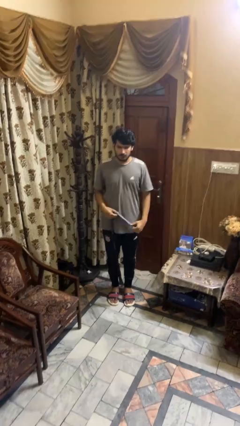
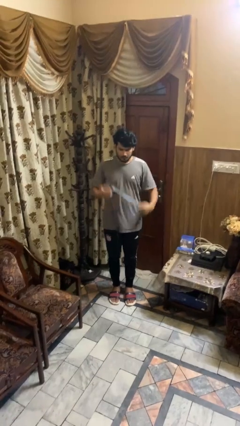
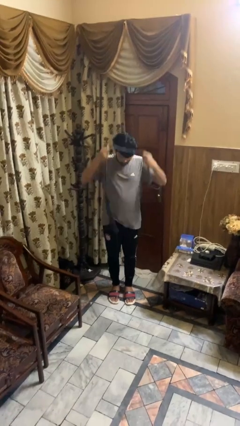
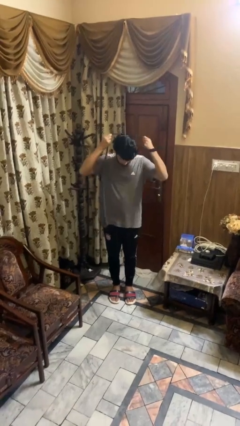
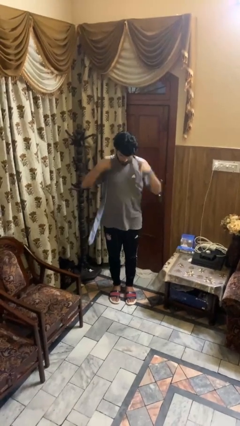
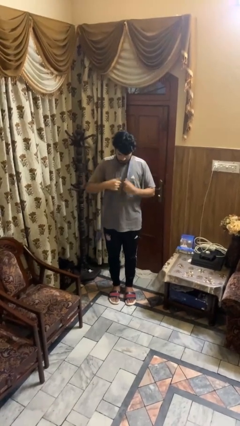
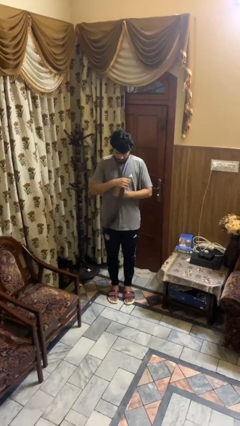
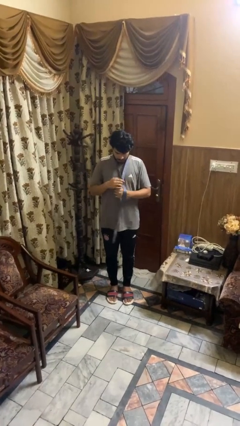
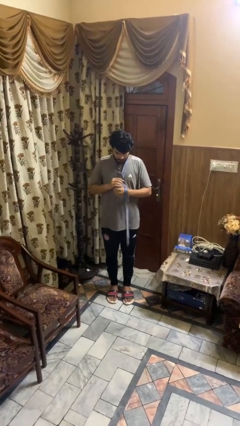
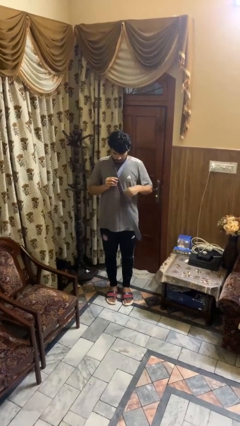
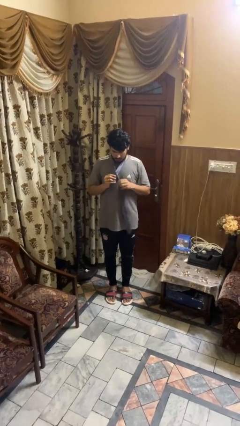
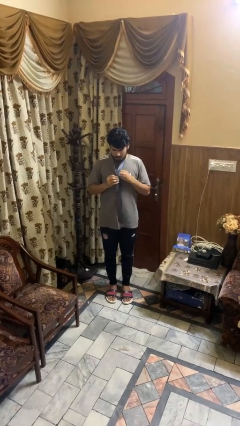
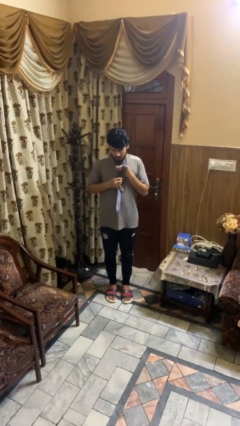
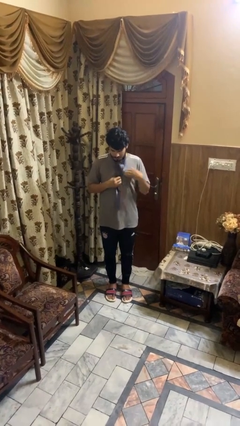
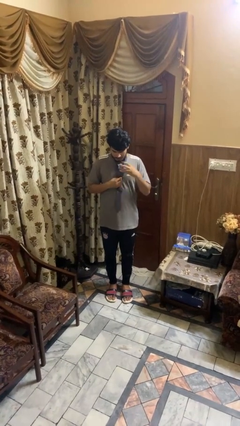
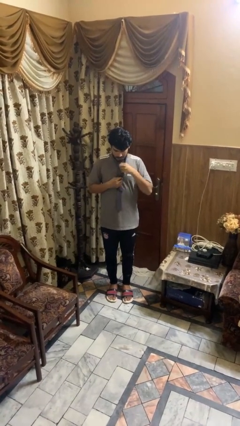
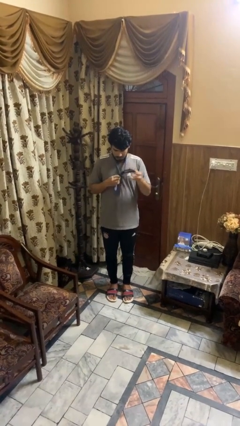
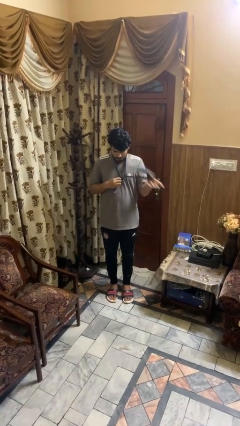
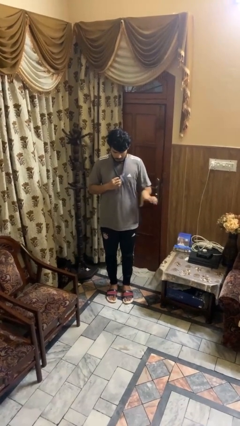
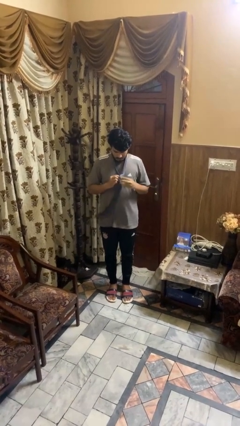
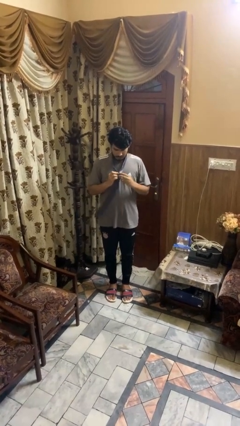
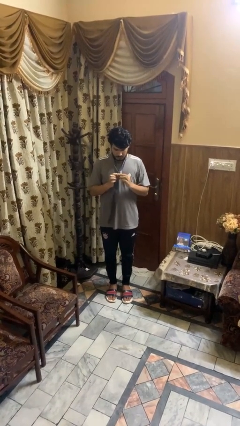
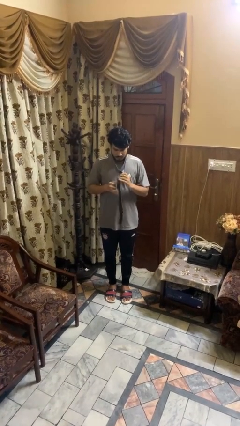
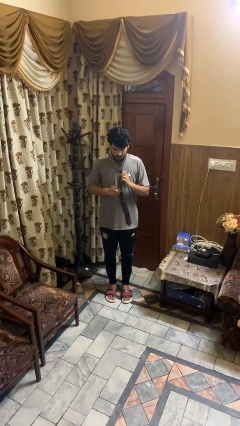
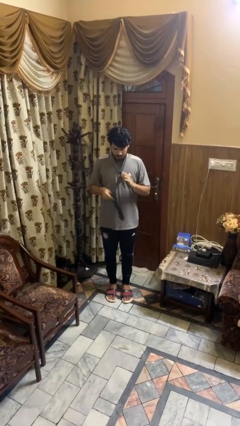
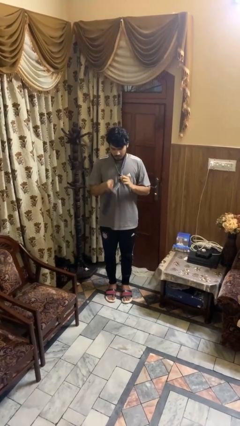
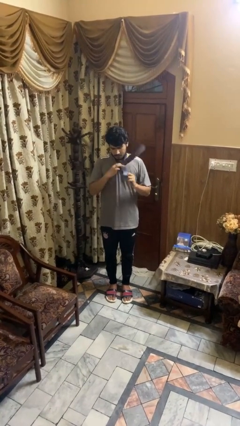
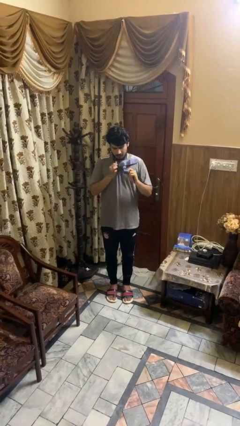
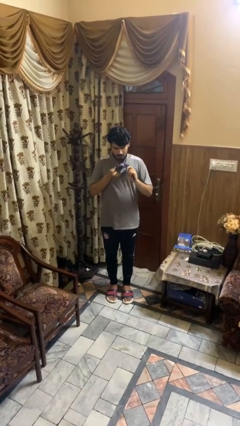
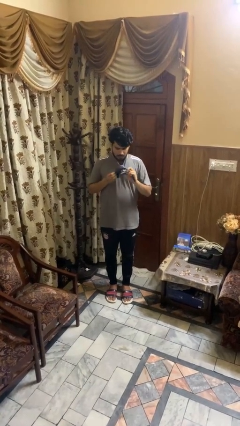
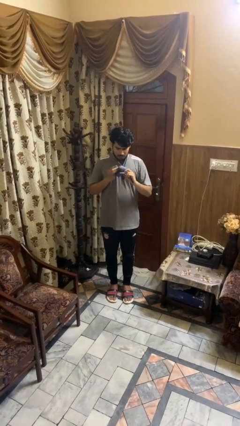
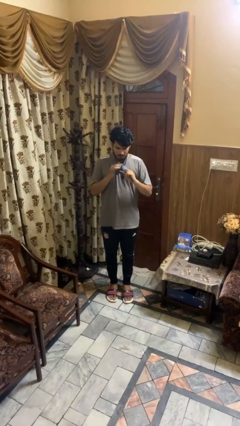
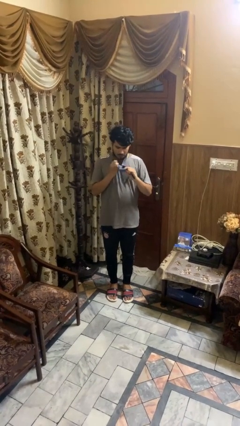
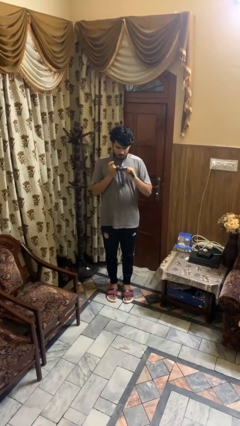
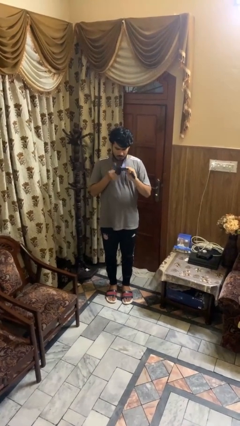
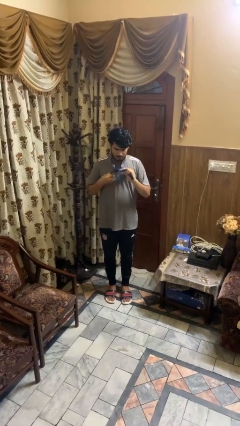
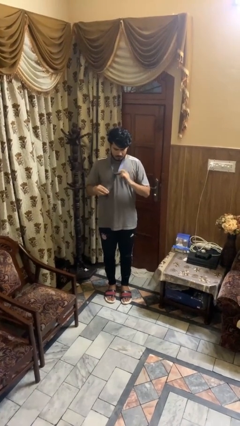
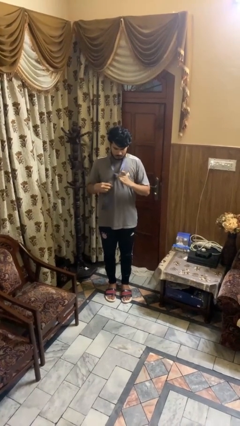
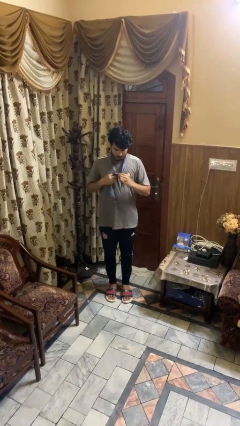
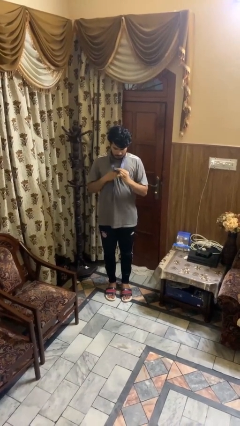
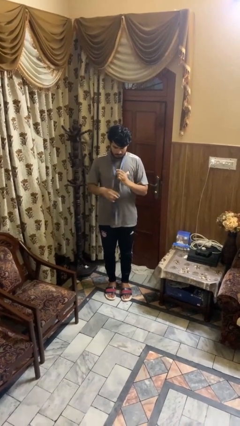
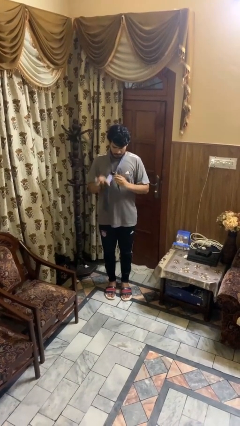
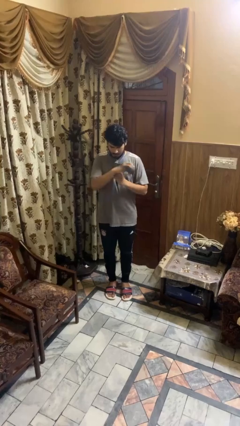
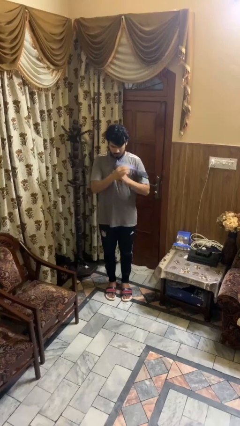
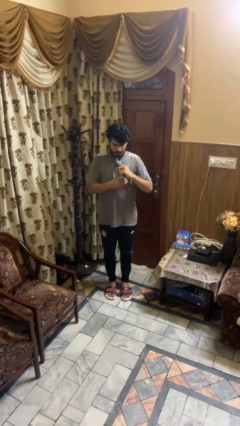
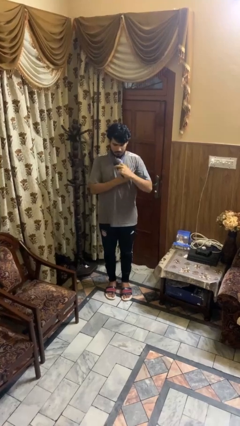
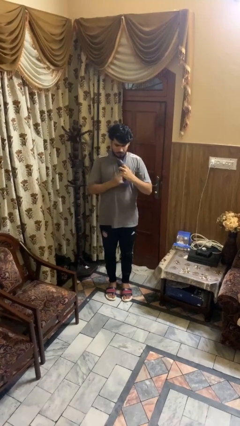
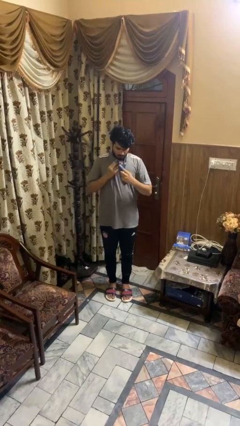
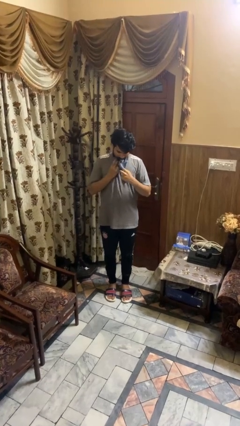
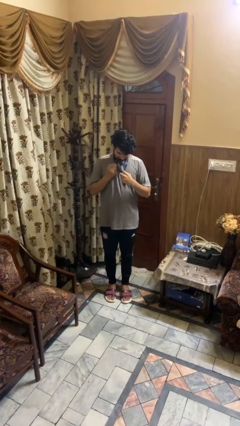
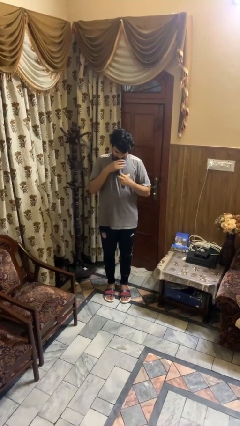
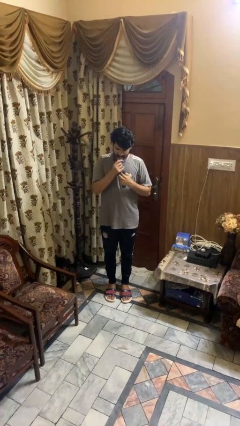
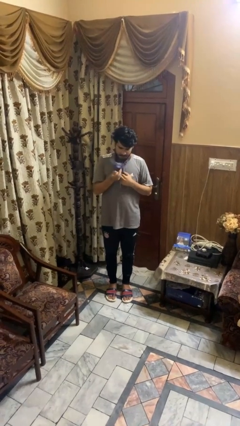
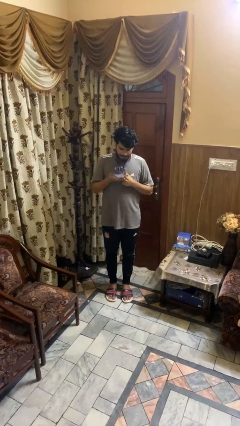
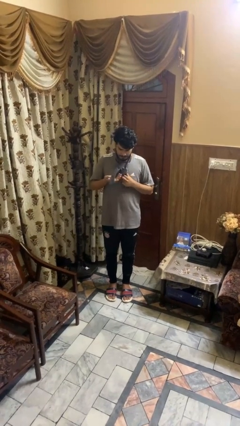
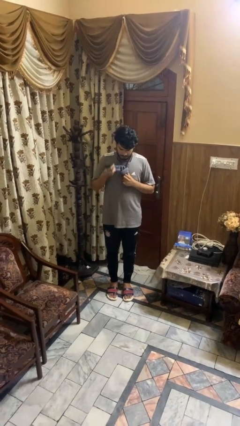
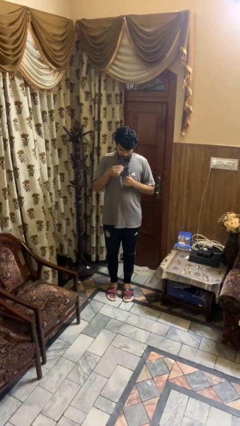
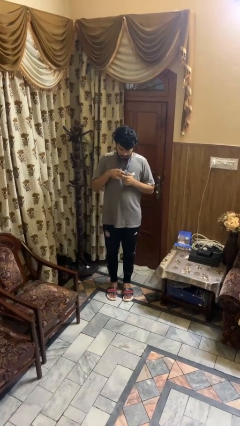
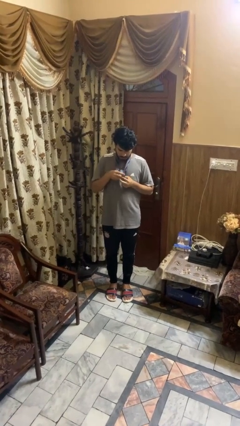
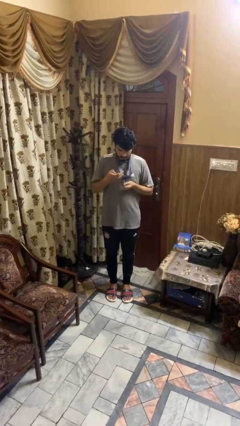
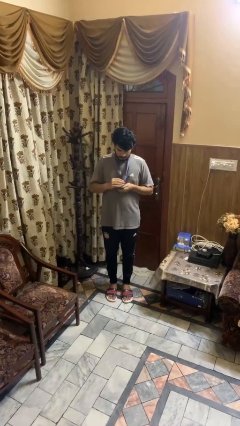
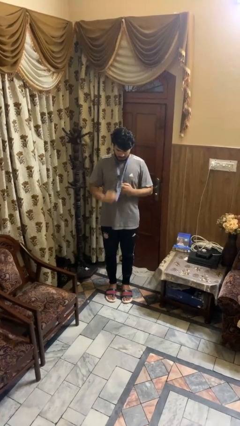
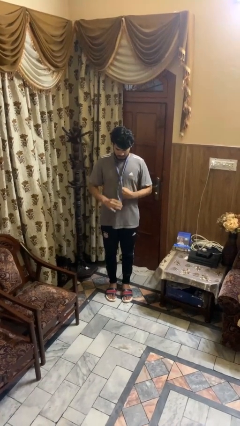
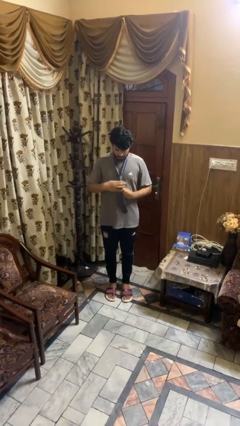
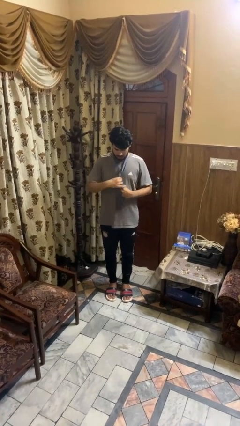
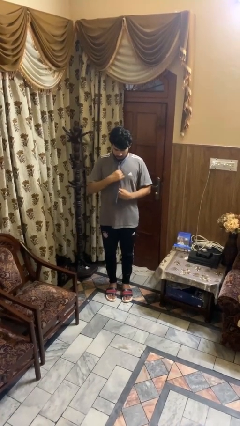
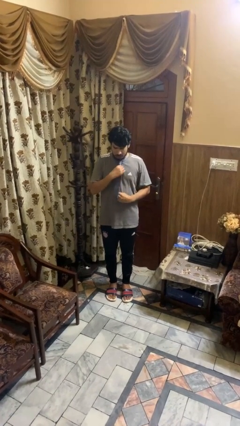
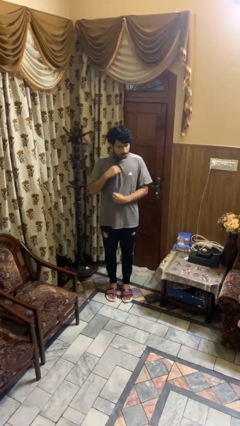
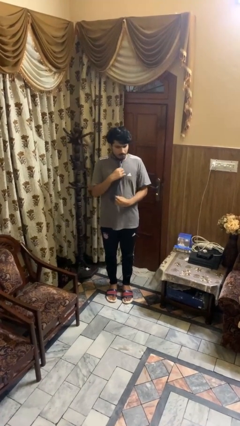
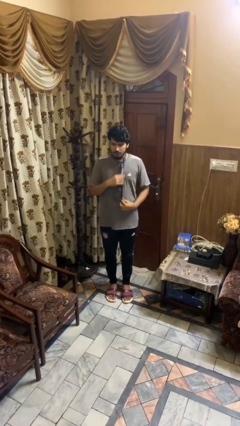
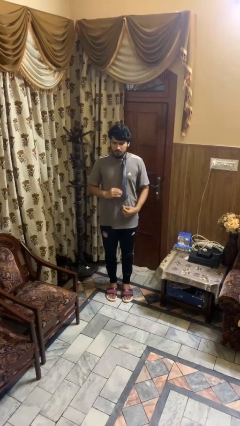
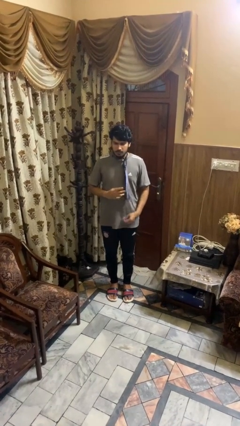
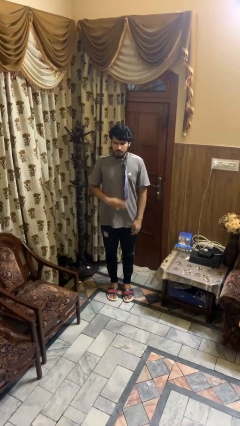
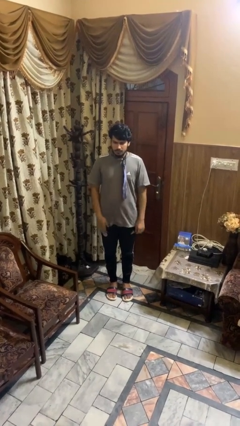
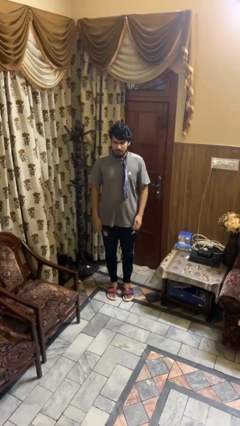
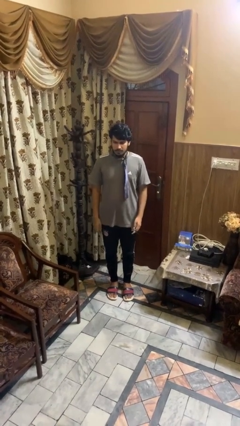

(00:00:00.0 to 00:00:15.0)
person puts on necktie

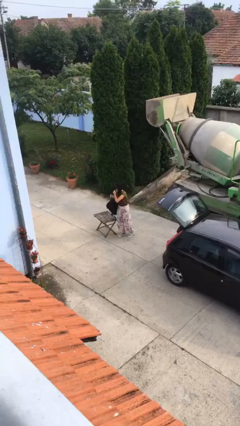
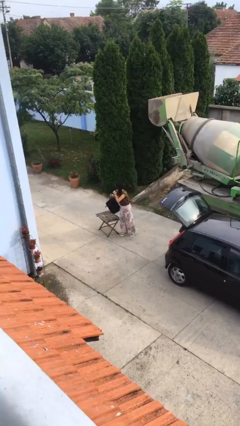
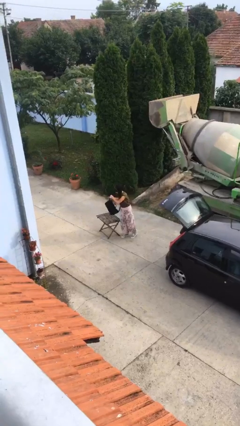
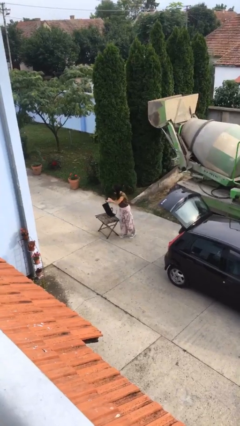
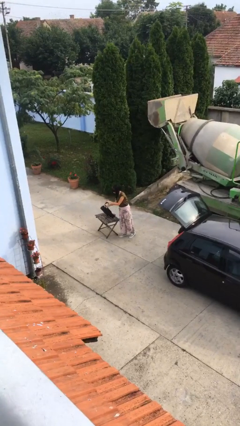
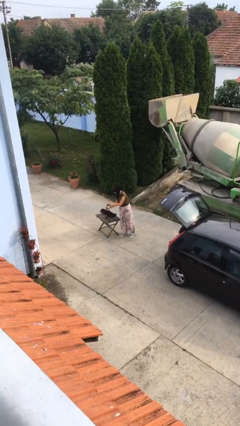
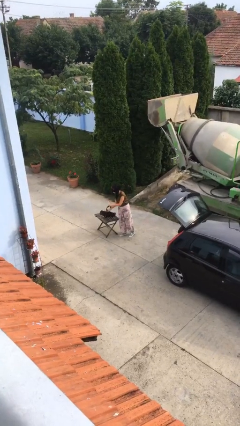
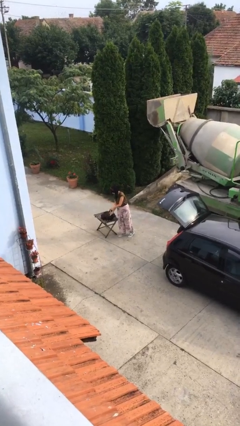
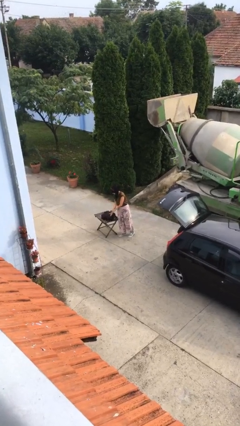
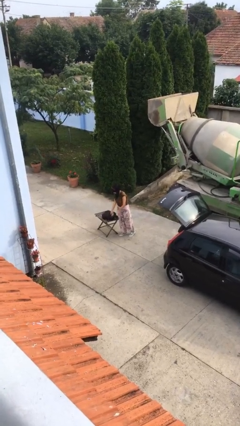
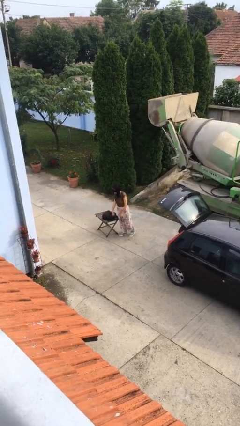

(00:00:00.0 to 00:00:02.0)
person puts down object on table

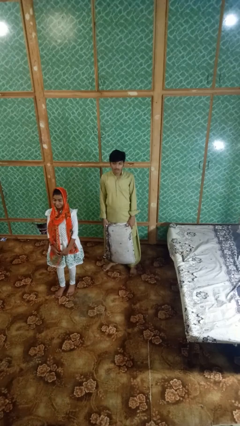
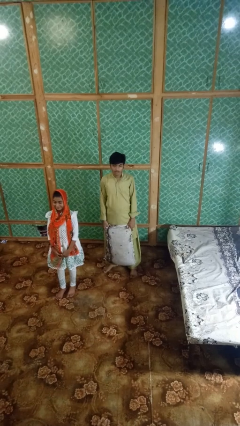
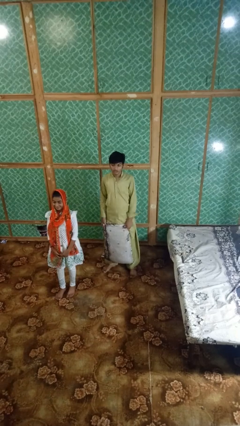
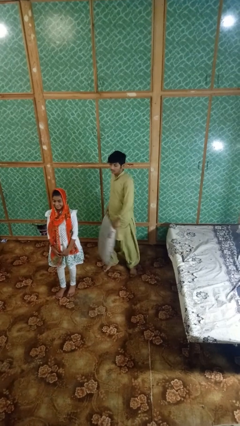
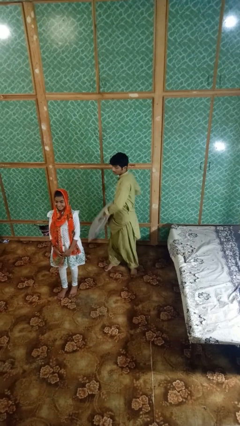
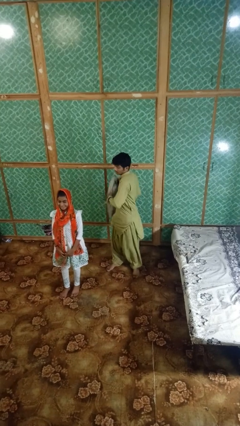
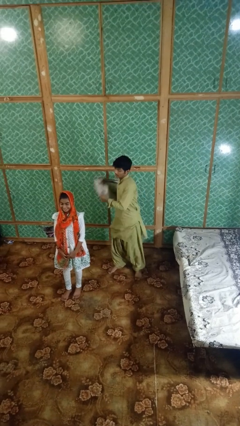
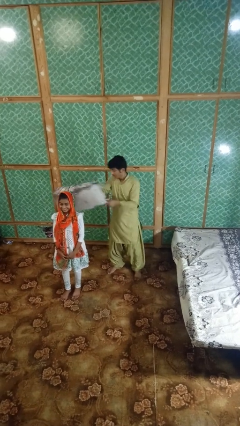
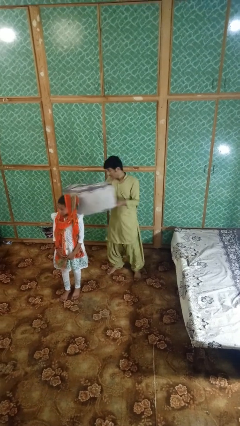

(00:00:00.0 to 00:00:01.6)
person hits person with pillow
